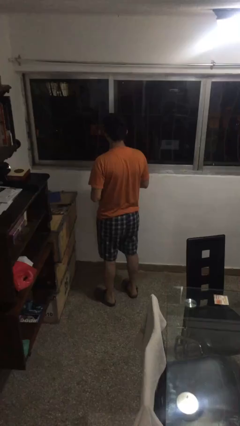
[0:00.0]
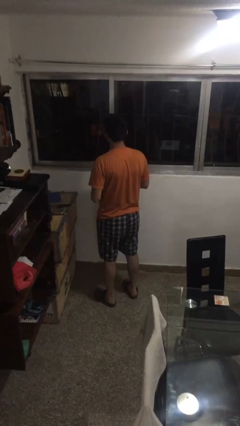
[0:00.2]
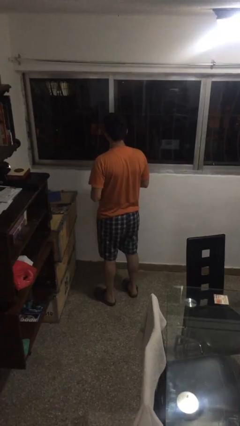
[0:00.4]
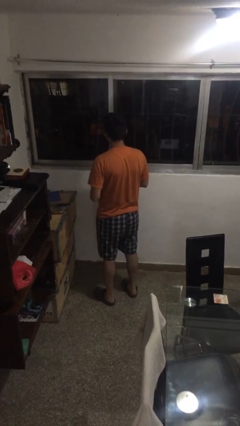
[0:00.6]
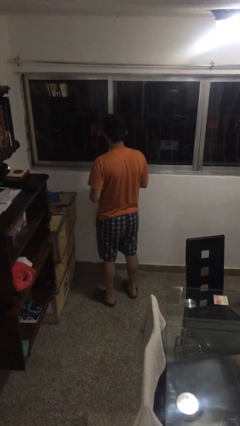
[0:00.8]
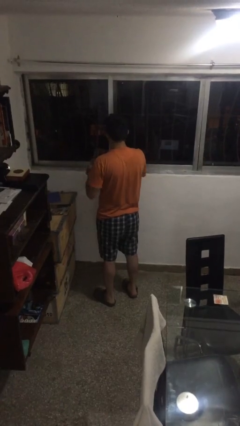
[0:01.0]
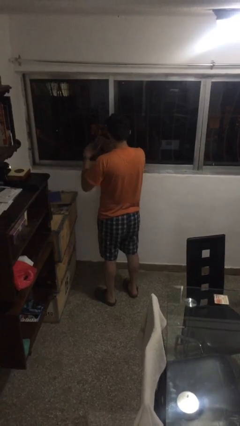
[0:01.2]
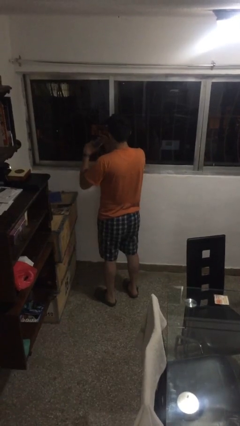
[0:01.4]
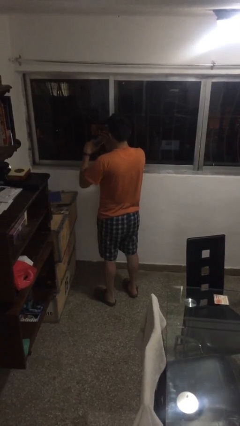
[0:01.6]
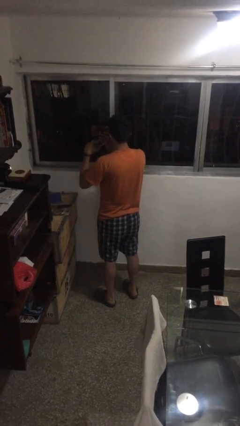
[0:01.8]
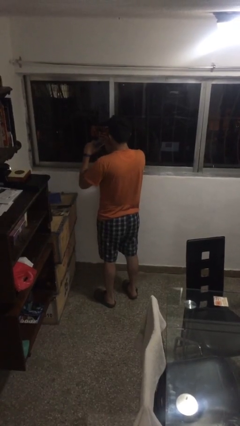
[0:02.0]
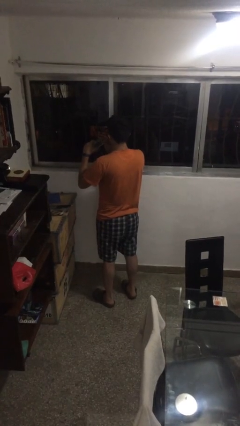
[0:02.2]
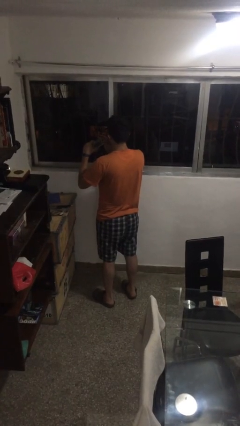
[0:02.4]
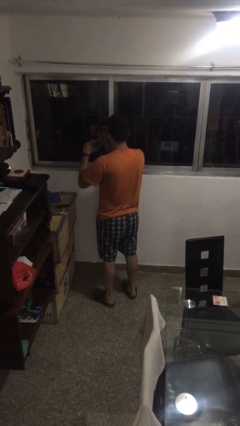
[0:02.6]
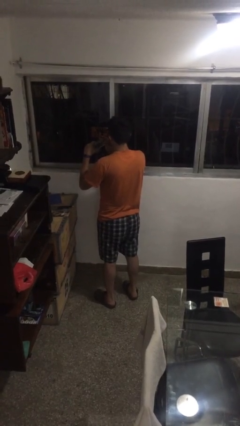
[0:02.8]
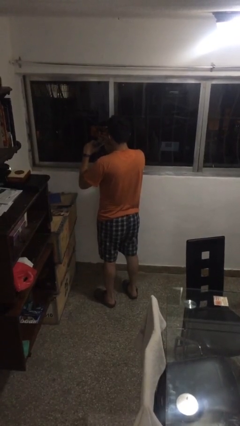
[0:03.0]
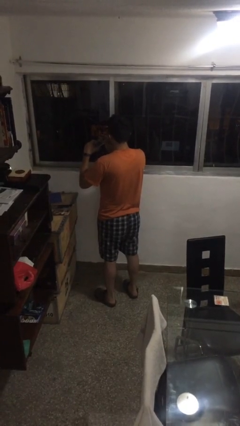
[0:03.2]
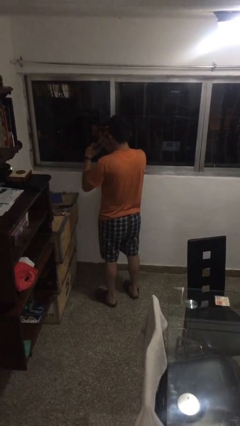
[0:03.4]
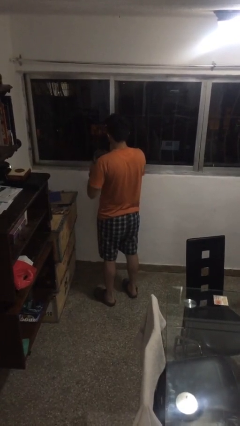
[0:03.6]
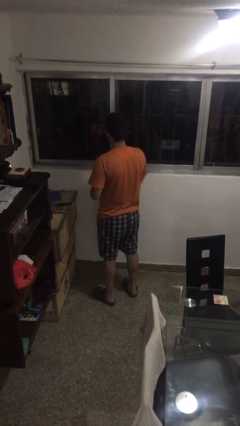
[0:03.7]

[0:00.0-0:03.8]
person drinks from straw

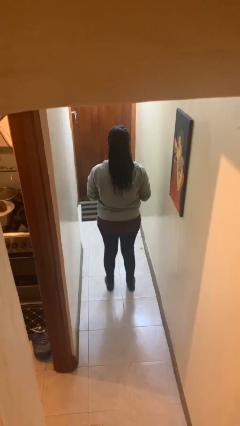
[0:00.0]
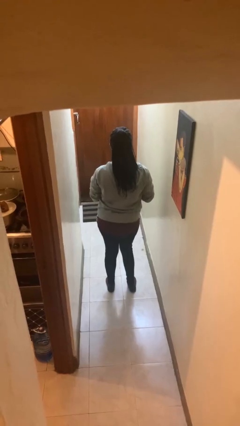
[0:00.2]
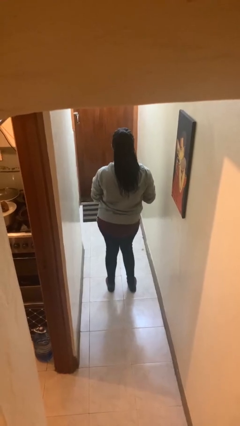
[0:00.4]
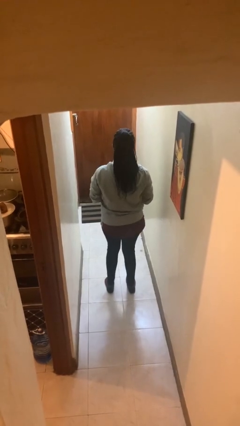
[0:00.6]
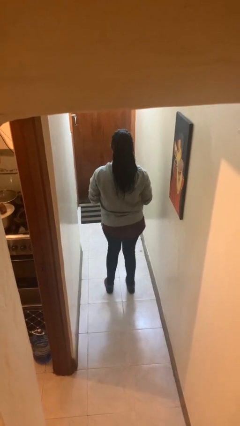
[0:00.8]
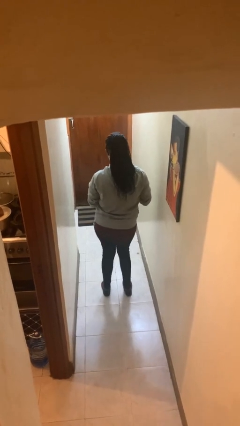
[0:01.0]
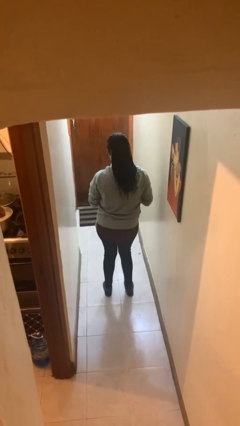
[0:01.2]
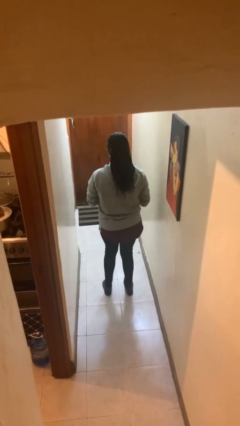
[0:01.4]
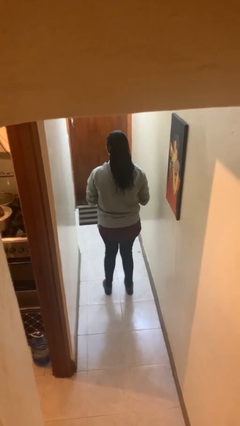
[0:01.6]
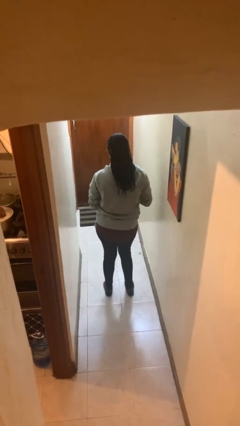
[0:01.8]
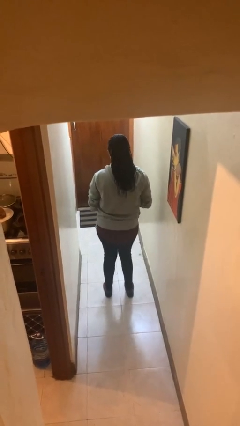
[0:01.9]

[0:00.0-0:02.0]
person wiggles hips

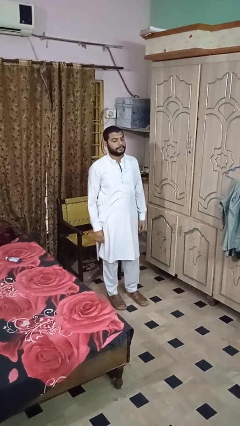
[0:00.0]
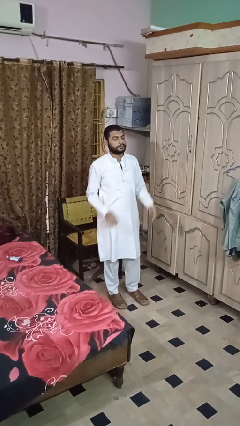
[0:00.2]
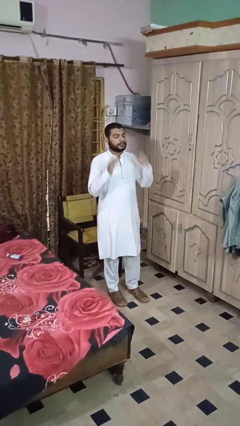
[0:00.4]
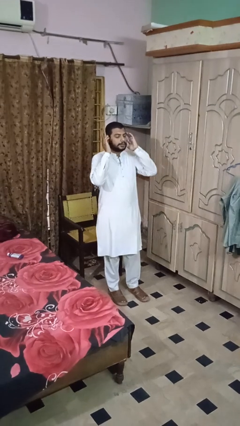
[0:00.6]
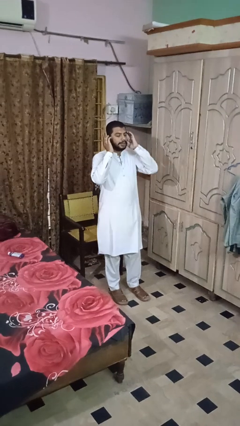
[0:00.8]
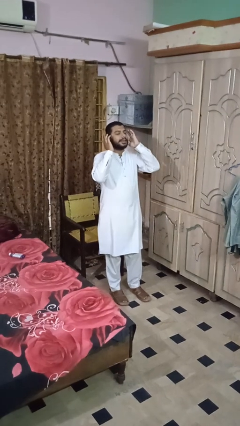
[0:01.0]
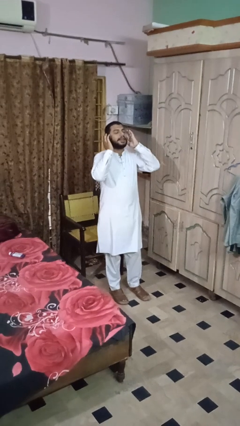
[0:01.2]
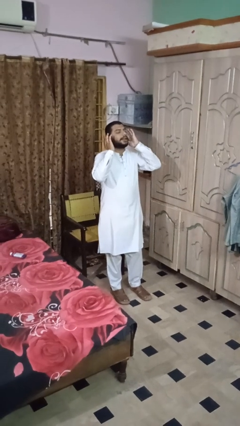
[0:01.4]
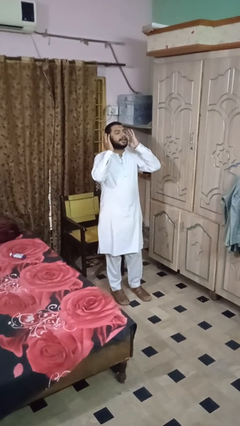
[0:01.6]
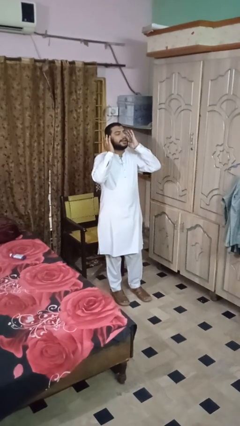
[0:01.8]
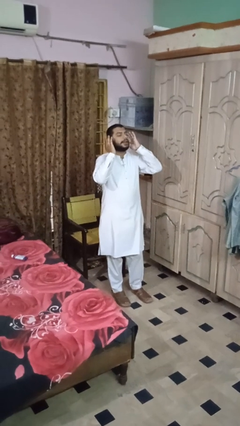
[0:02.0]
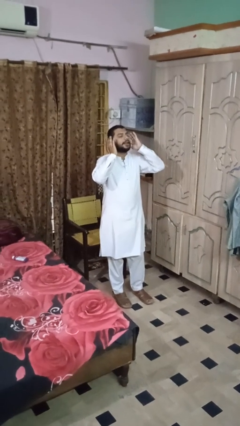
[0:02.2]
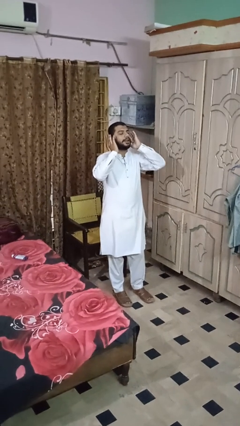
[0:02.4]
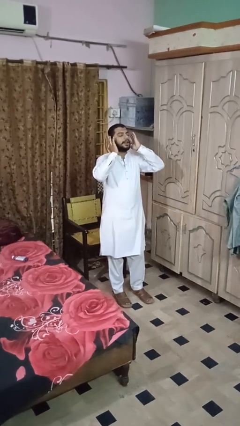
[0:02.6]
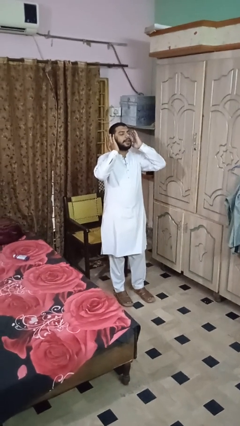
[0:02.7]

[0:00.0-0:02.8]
person puts fingers in ear

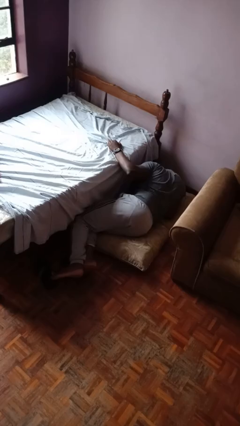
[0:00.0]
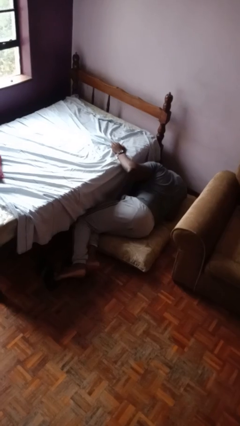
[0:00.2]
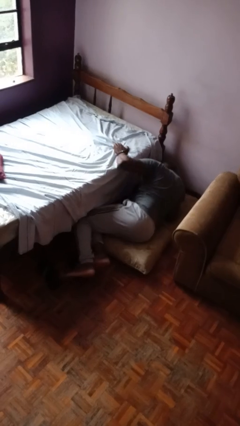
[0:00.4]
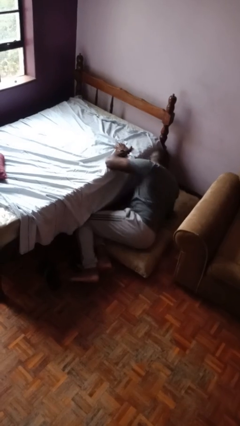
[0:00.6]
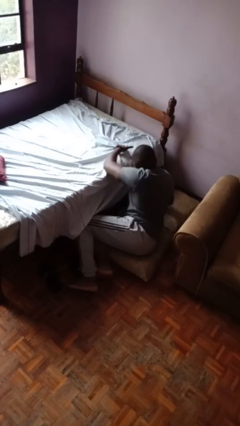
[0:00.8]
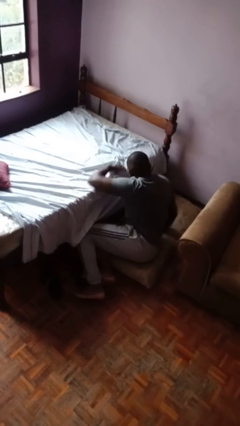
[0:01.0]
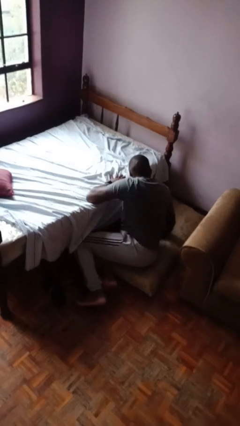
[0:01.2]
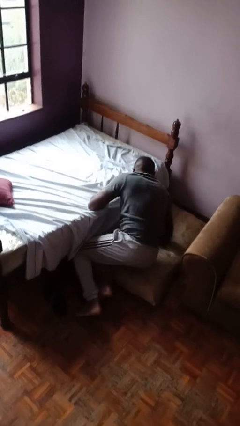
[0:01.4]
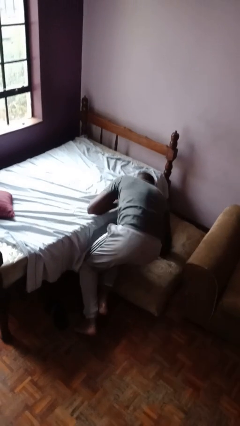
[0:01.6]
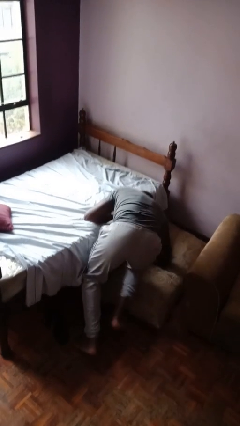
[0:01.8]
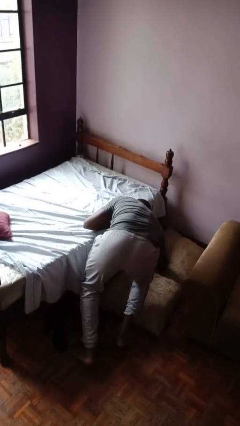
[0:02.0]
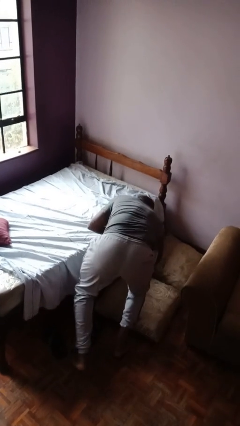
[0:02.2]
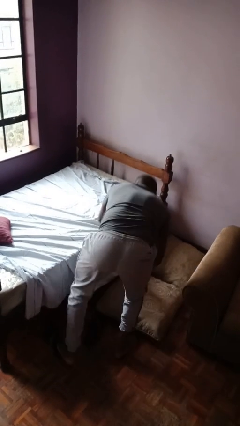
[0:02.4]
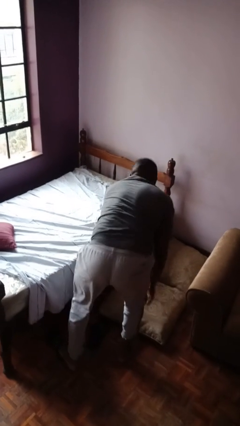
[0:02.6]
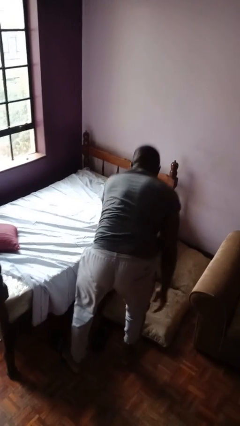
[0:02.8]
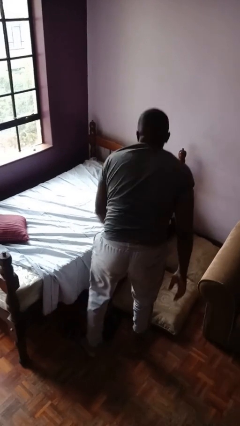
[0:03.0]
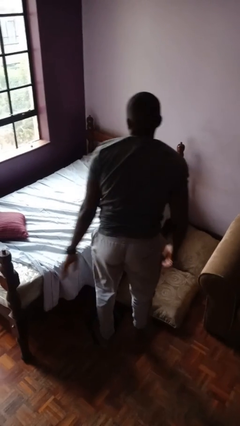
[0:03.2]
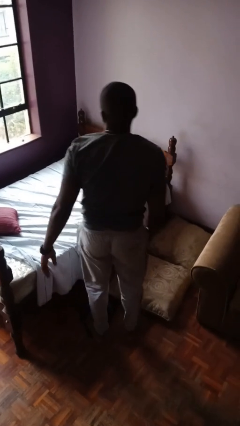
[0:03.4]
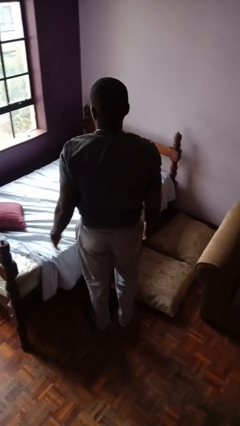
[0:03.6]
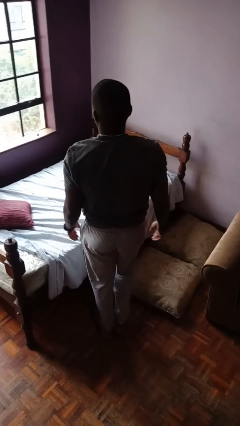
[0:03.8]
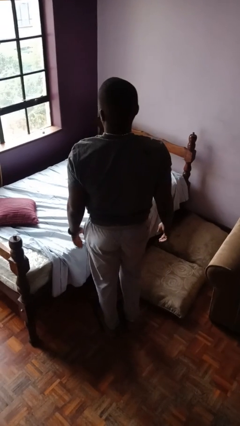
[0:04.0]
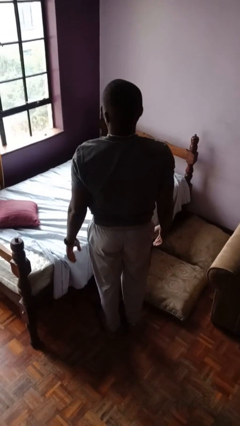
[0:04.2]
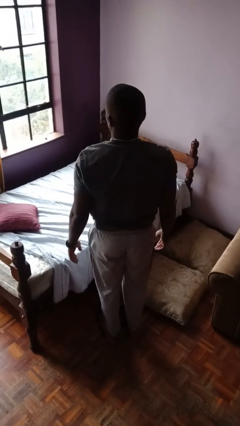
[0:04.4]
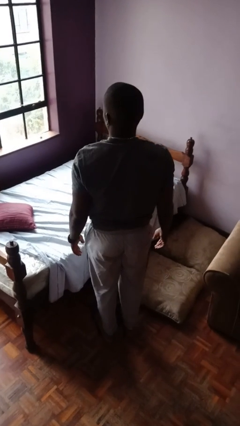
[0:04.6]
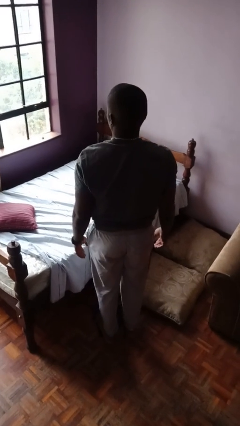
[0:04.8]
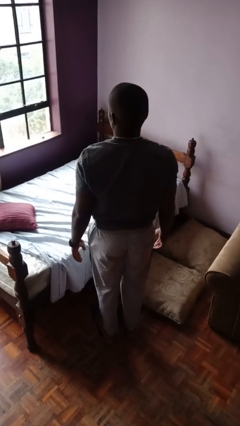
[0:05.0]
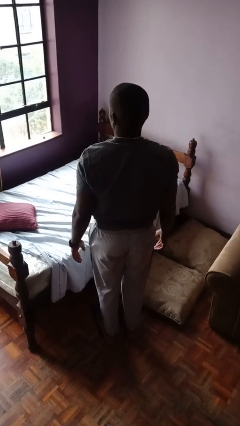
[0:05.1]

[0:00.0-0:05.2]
person stands up from floor

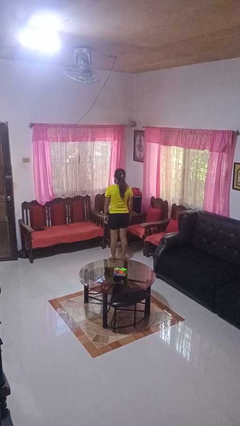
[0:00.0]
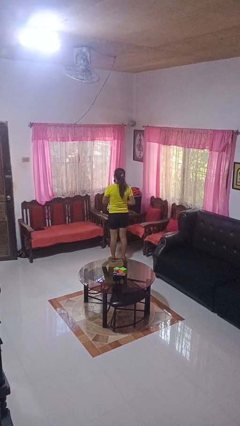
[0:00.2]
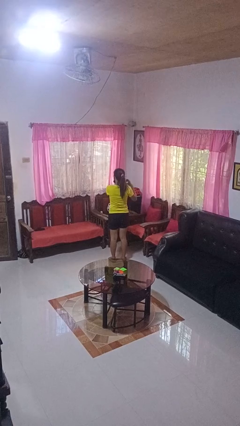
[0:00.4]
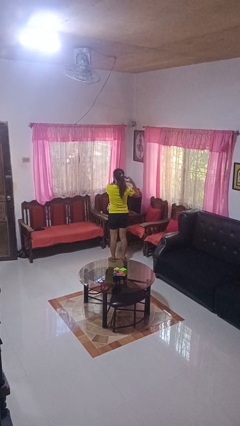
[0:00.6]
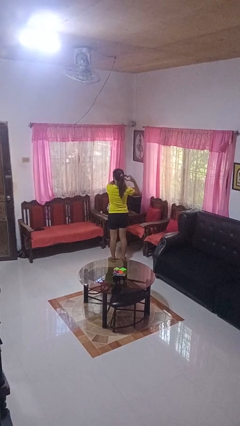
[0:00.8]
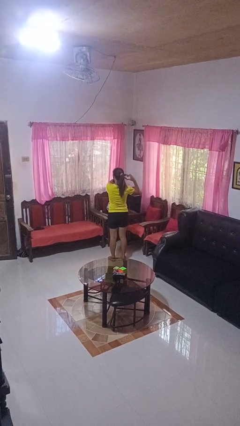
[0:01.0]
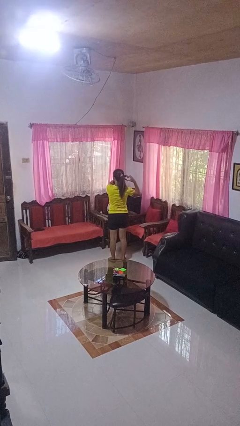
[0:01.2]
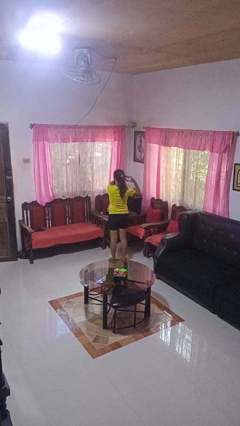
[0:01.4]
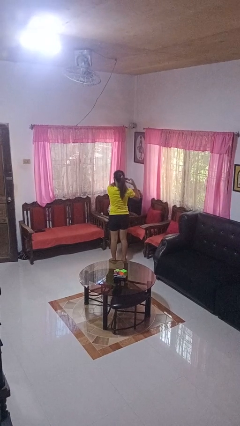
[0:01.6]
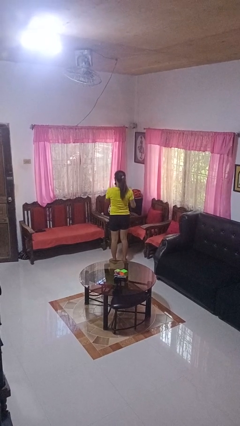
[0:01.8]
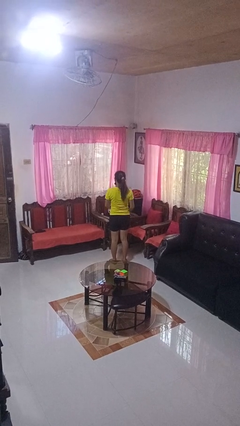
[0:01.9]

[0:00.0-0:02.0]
person gestures heart

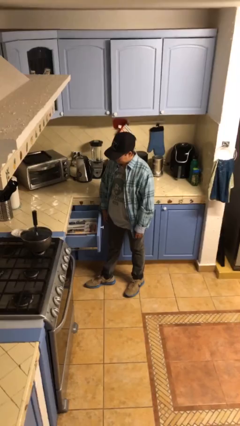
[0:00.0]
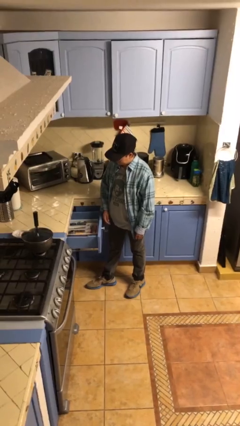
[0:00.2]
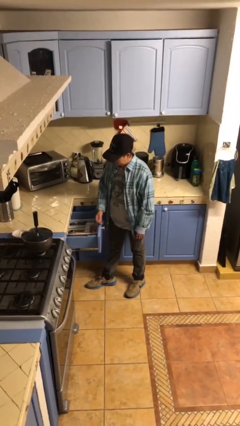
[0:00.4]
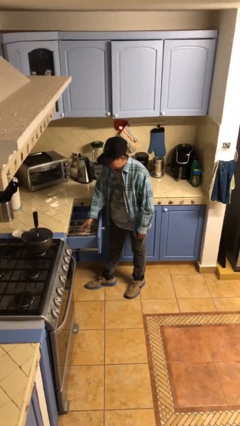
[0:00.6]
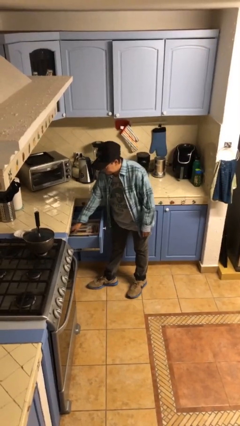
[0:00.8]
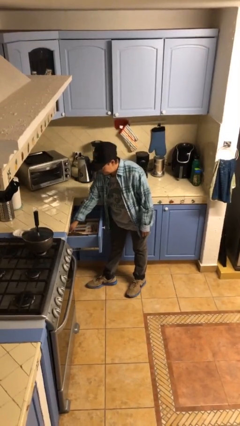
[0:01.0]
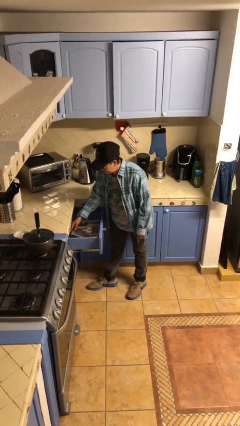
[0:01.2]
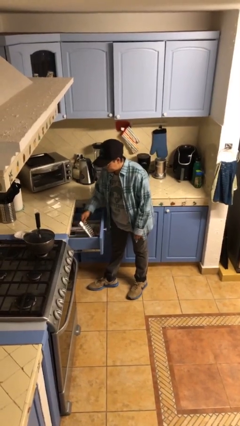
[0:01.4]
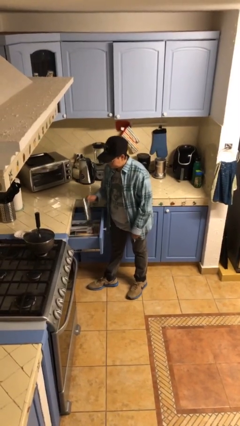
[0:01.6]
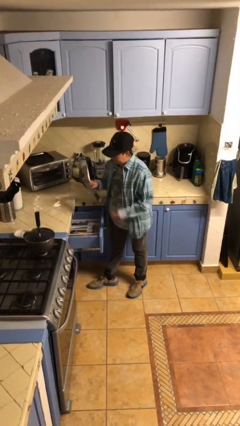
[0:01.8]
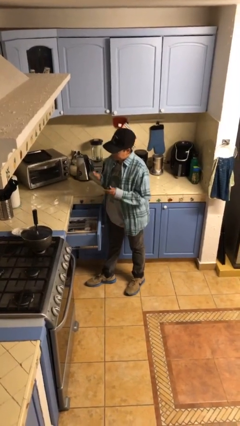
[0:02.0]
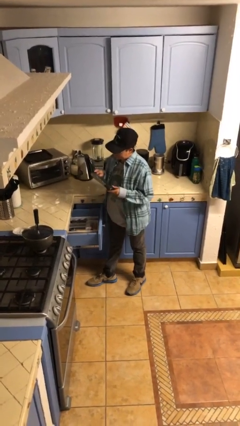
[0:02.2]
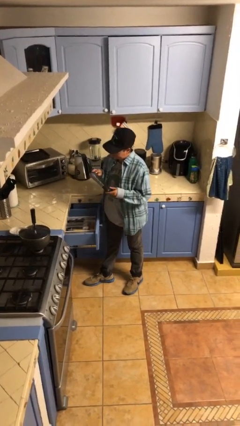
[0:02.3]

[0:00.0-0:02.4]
person takes object from kitchen drawer
